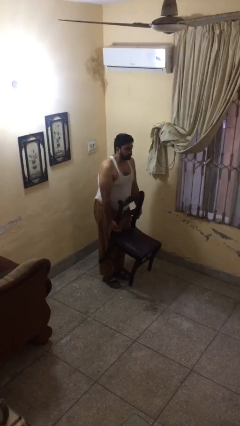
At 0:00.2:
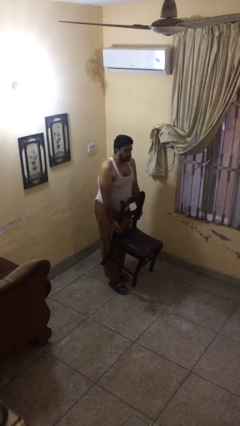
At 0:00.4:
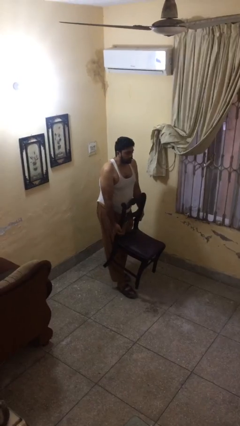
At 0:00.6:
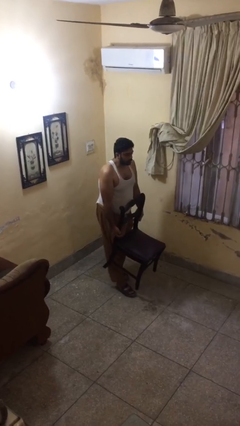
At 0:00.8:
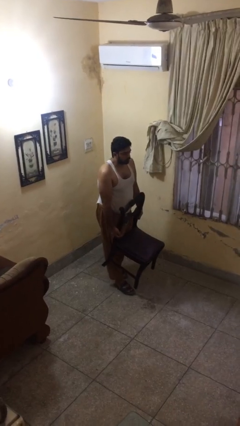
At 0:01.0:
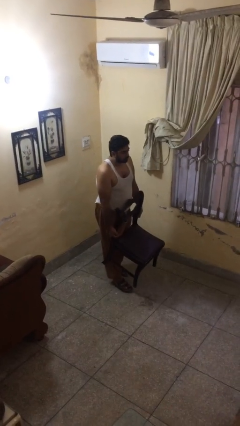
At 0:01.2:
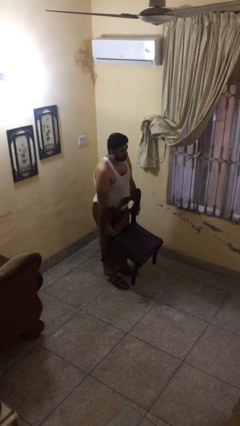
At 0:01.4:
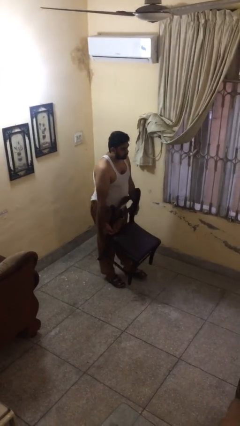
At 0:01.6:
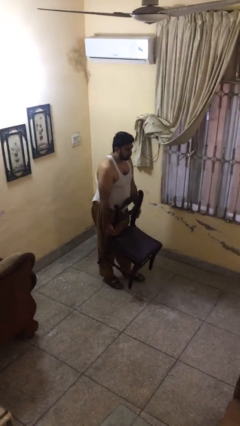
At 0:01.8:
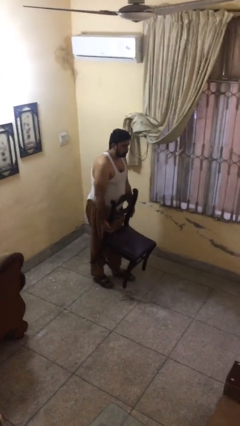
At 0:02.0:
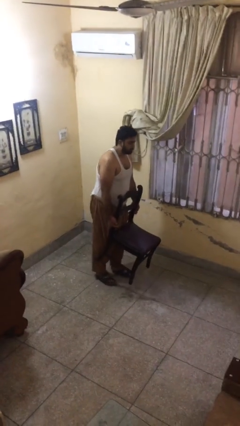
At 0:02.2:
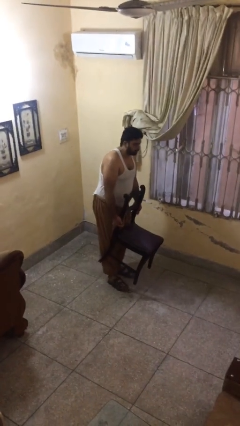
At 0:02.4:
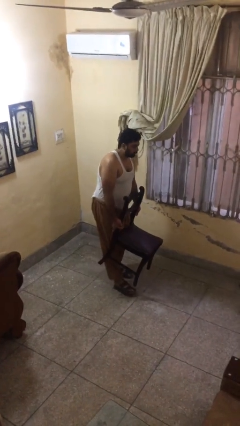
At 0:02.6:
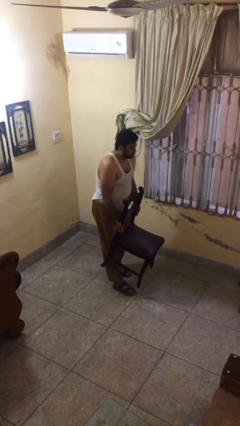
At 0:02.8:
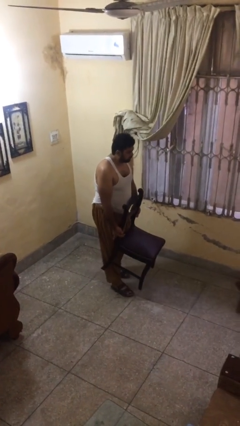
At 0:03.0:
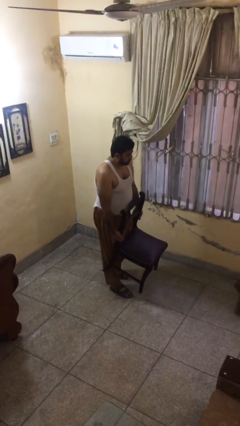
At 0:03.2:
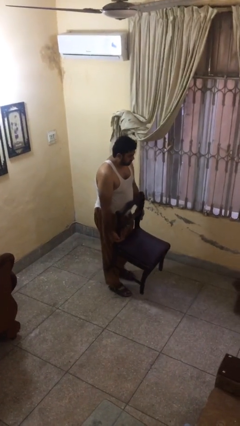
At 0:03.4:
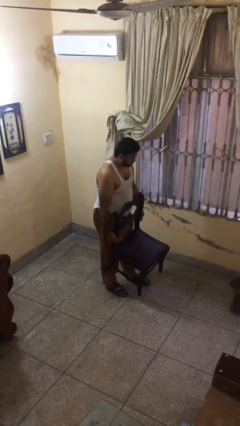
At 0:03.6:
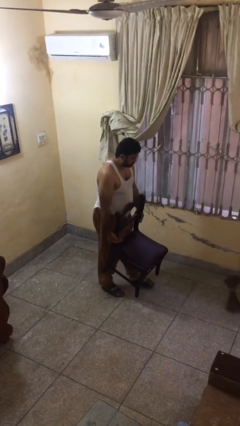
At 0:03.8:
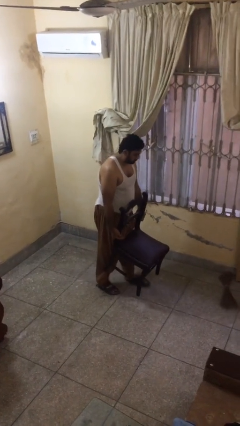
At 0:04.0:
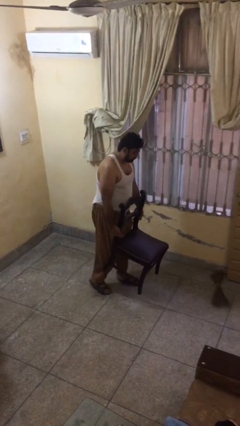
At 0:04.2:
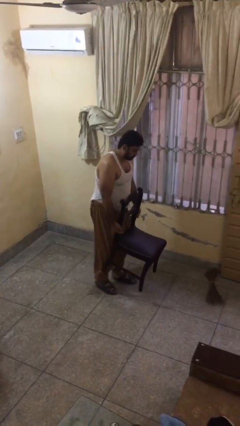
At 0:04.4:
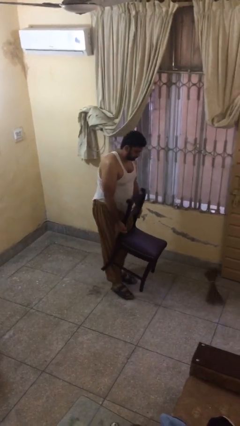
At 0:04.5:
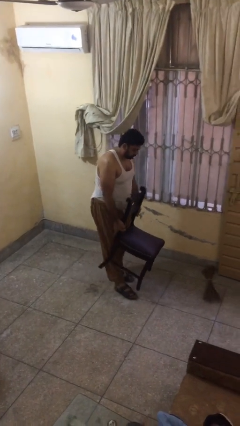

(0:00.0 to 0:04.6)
person carries heavy object

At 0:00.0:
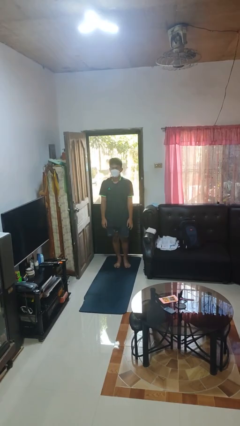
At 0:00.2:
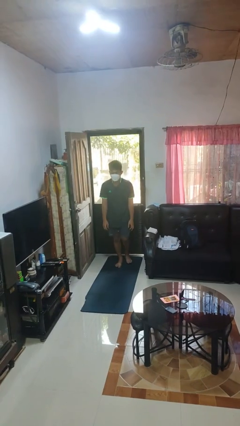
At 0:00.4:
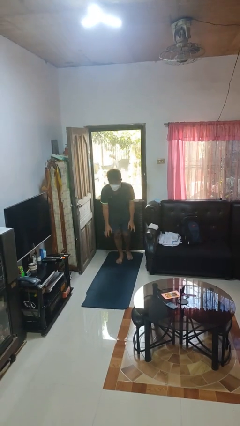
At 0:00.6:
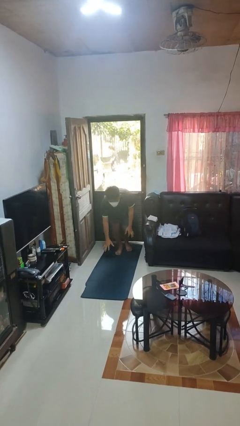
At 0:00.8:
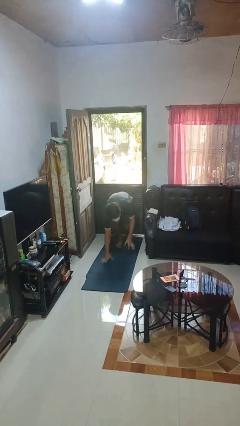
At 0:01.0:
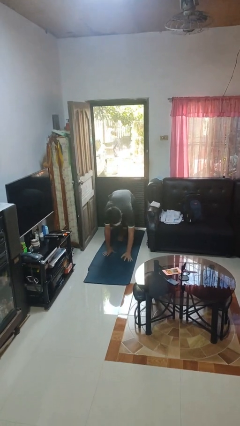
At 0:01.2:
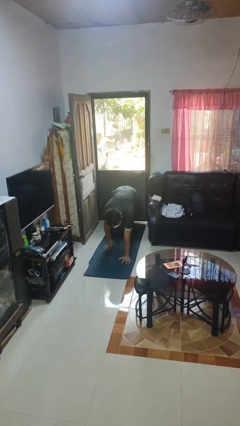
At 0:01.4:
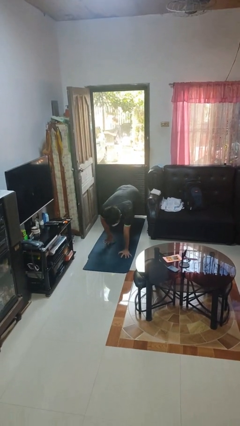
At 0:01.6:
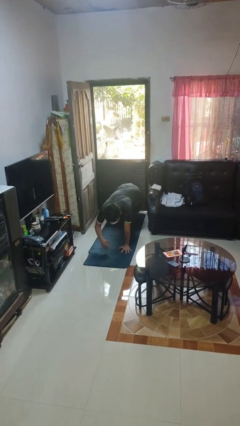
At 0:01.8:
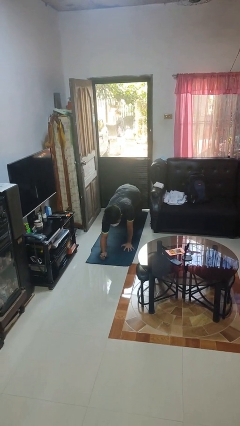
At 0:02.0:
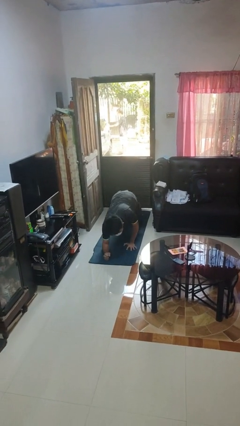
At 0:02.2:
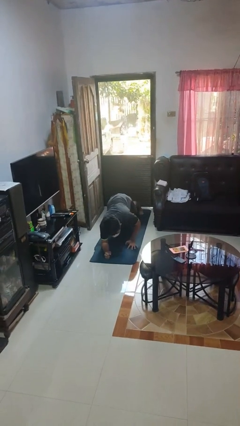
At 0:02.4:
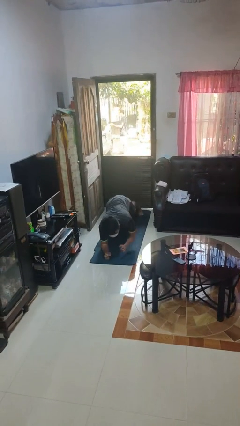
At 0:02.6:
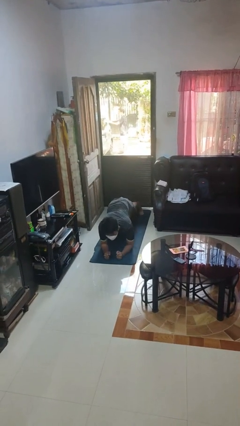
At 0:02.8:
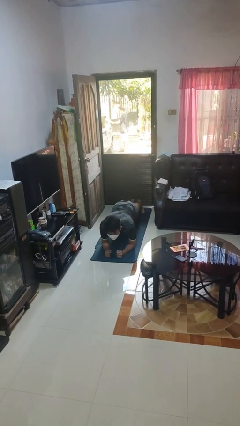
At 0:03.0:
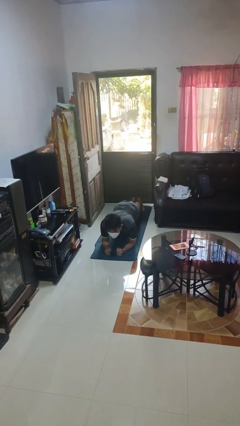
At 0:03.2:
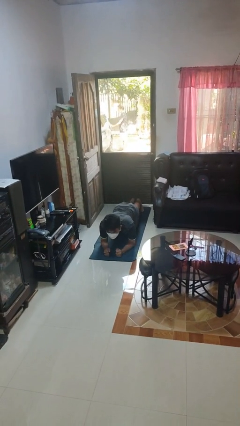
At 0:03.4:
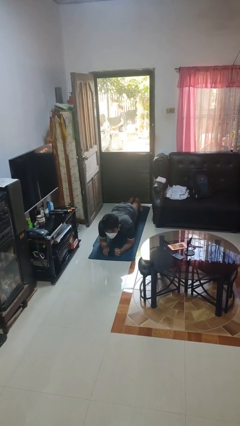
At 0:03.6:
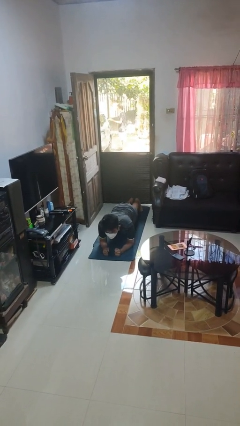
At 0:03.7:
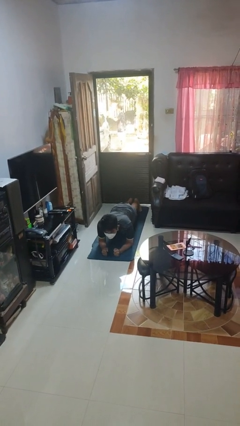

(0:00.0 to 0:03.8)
person exercises with plank

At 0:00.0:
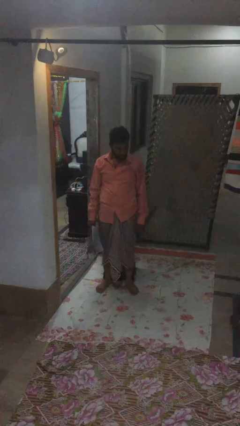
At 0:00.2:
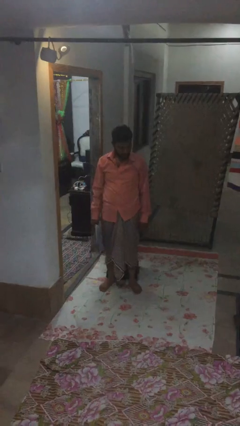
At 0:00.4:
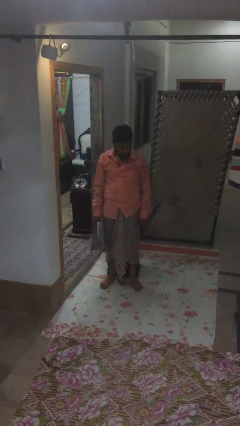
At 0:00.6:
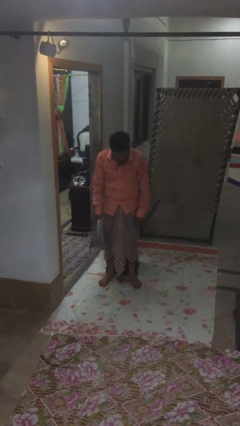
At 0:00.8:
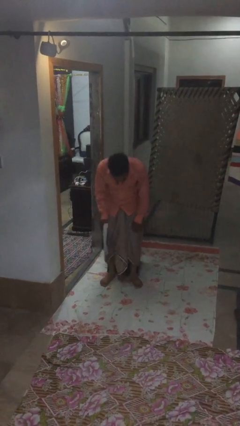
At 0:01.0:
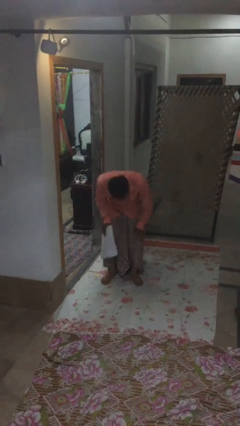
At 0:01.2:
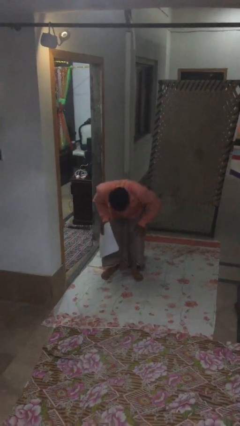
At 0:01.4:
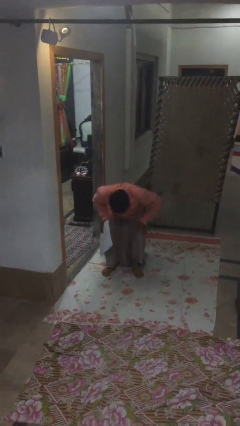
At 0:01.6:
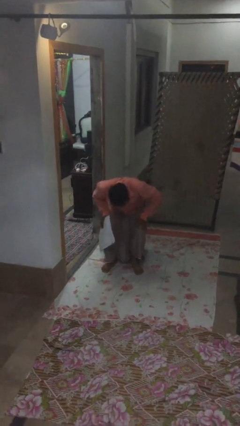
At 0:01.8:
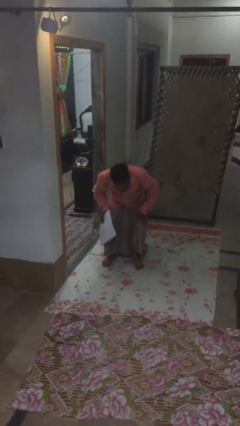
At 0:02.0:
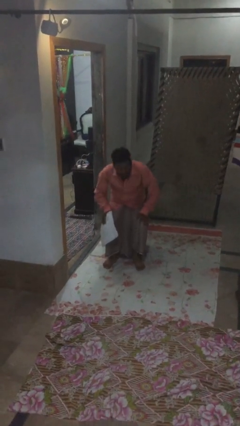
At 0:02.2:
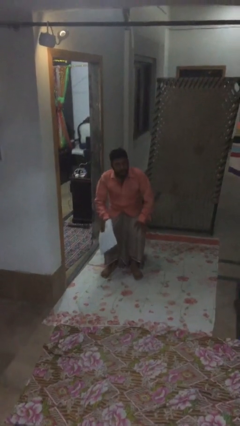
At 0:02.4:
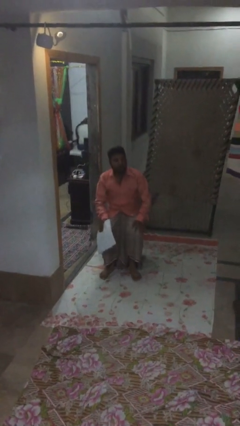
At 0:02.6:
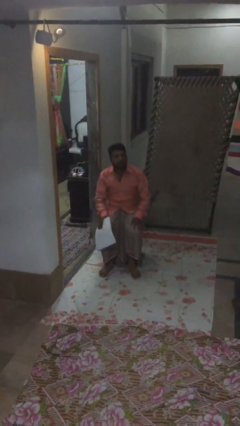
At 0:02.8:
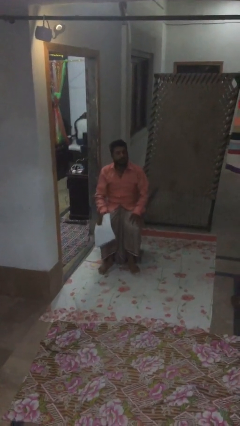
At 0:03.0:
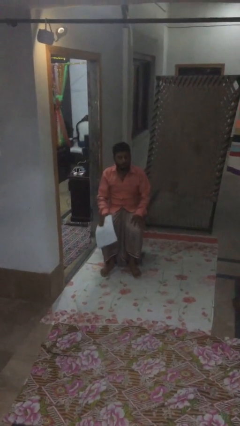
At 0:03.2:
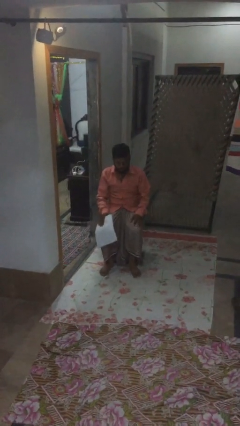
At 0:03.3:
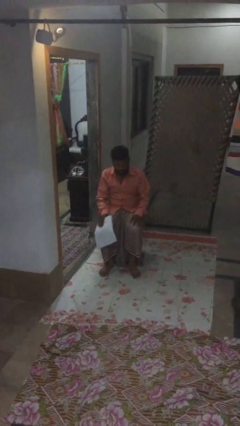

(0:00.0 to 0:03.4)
person sits down

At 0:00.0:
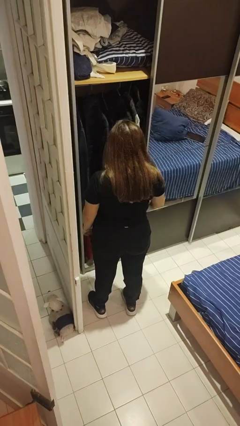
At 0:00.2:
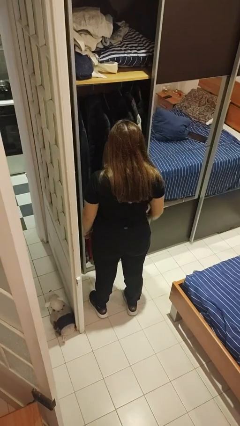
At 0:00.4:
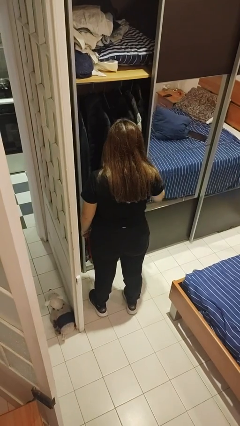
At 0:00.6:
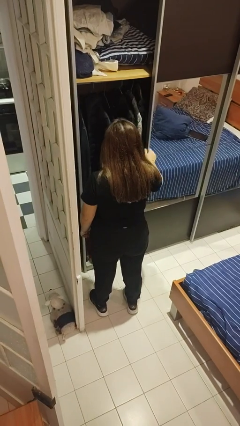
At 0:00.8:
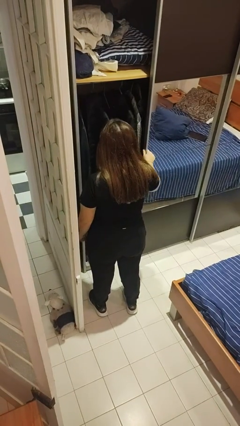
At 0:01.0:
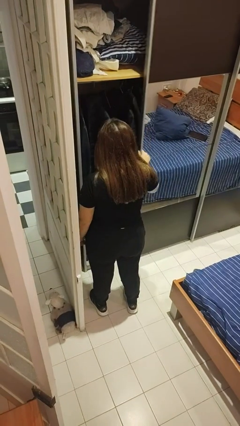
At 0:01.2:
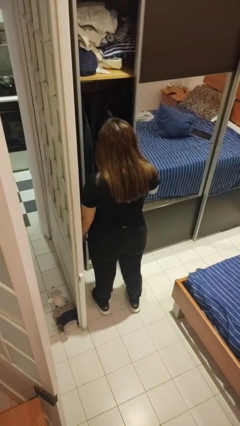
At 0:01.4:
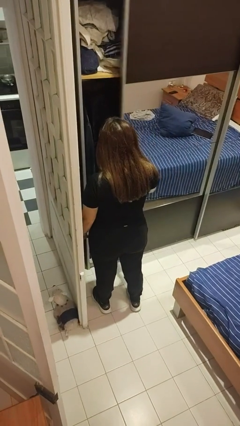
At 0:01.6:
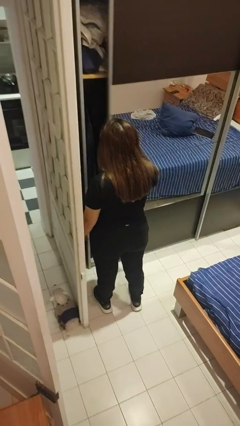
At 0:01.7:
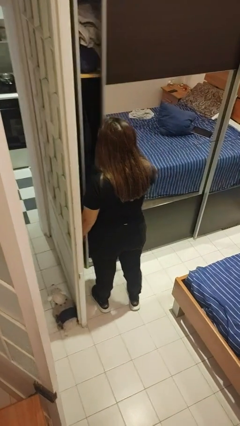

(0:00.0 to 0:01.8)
person closes dresser drawer

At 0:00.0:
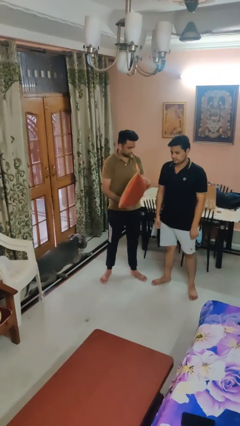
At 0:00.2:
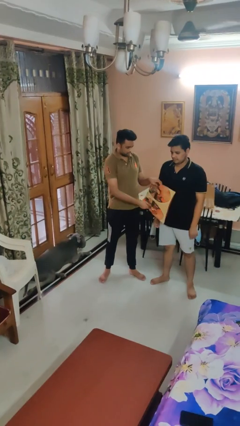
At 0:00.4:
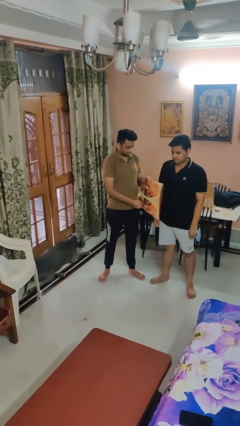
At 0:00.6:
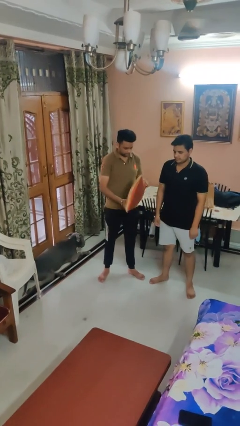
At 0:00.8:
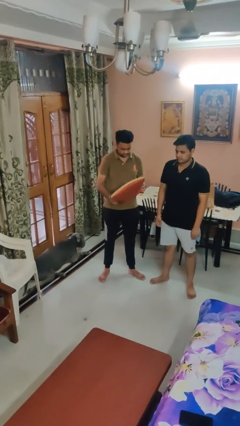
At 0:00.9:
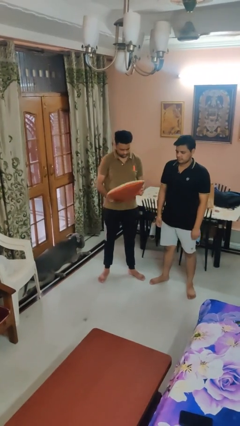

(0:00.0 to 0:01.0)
person hits person with pillow

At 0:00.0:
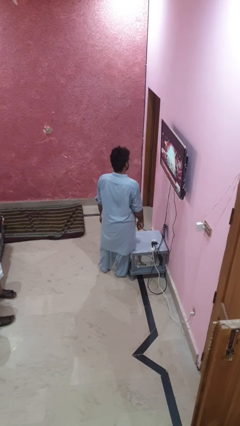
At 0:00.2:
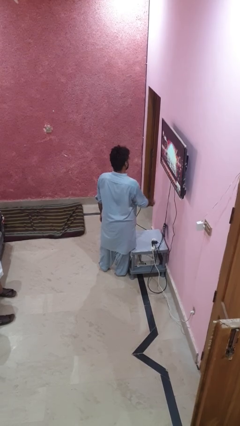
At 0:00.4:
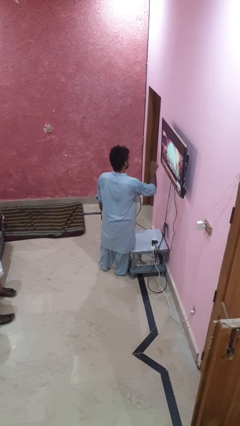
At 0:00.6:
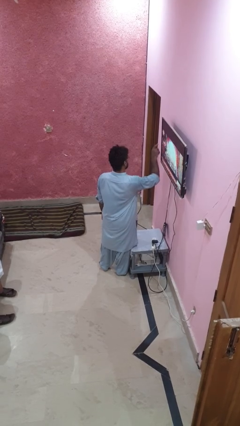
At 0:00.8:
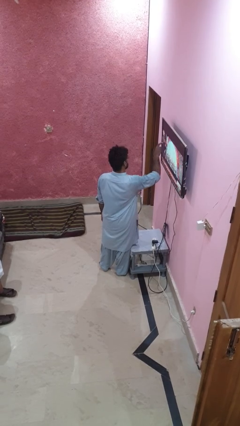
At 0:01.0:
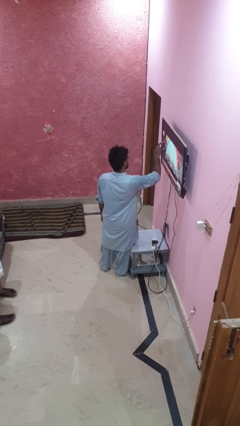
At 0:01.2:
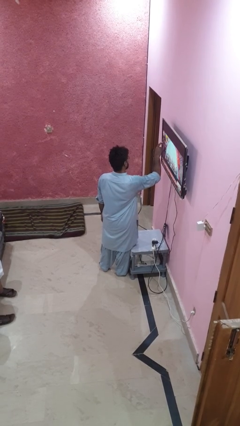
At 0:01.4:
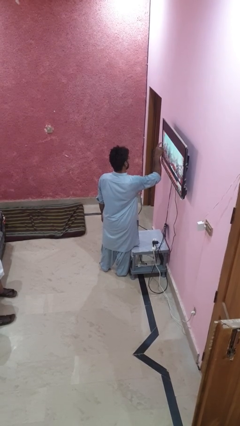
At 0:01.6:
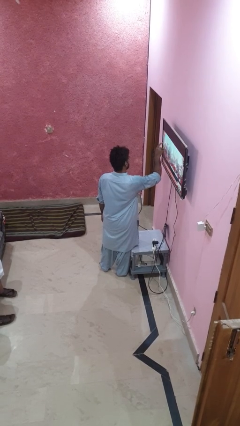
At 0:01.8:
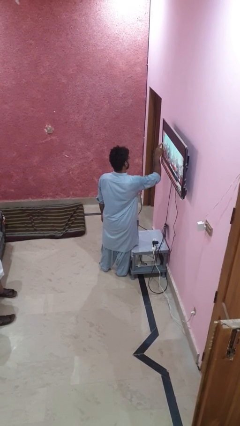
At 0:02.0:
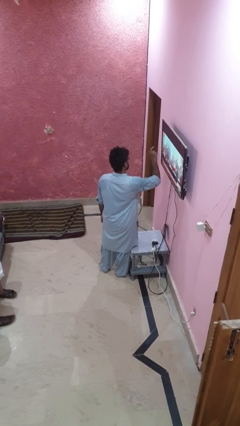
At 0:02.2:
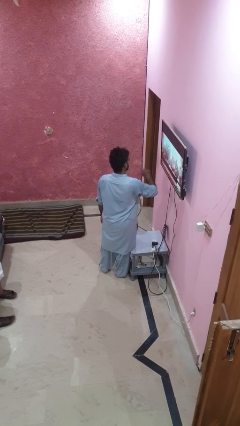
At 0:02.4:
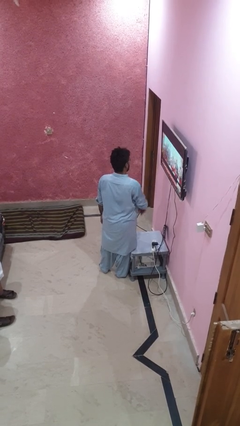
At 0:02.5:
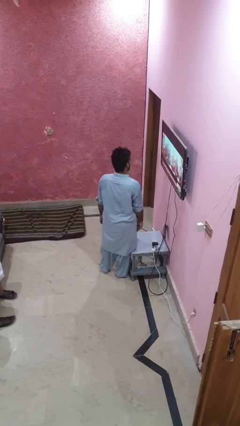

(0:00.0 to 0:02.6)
person taps object with finger
